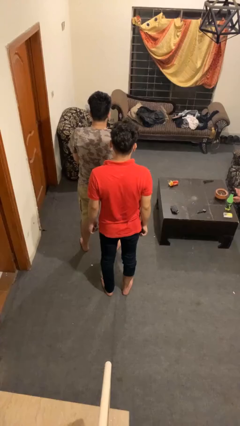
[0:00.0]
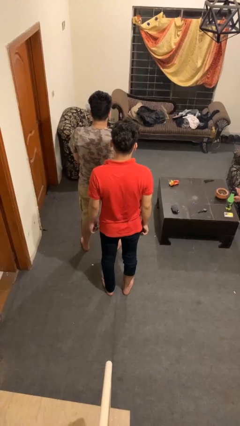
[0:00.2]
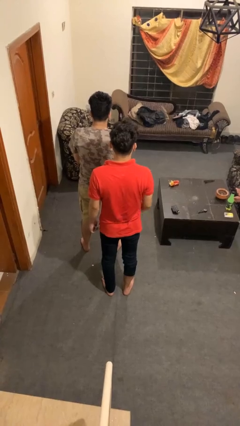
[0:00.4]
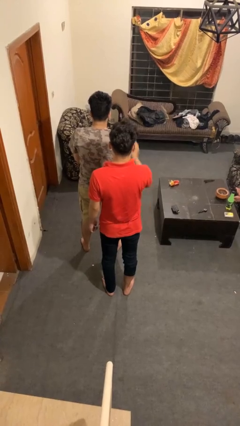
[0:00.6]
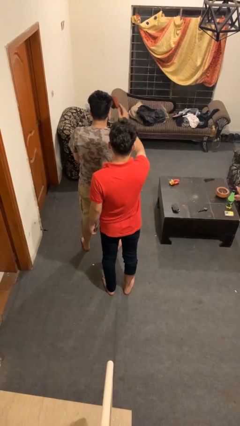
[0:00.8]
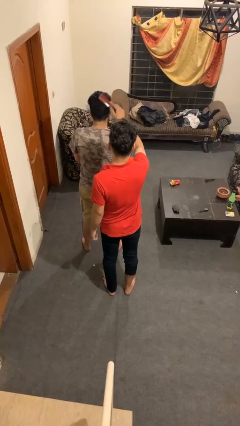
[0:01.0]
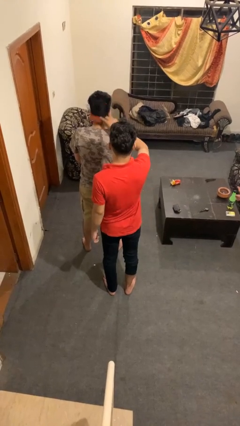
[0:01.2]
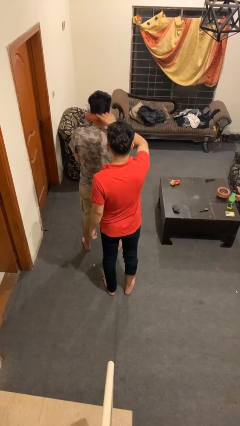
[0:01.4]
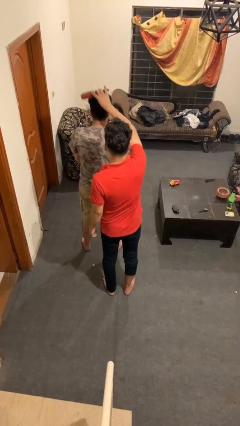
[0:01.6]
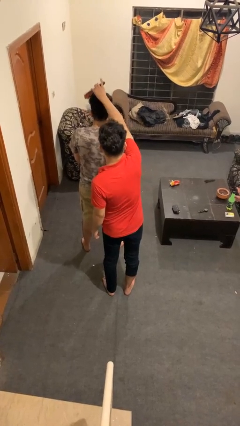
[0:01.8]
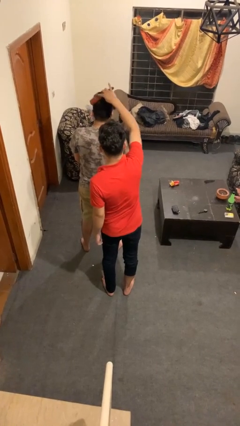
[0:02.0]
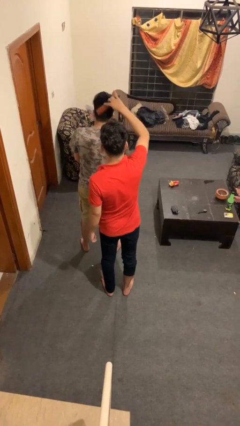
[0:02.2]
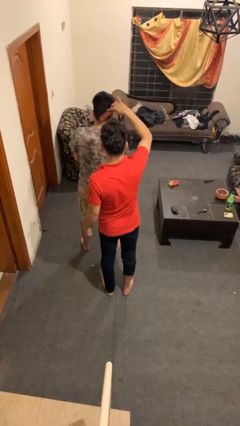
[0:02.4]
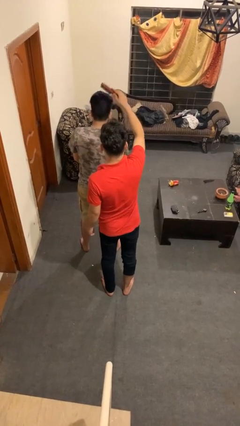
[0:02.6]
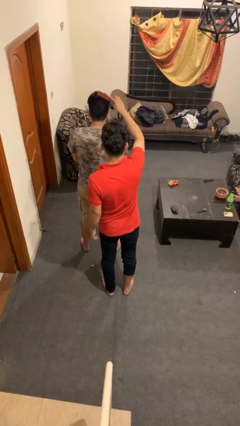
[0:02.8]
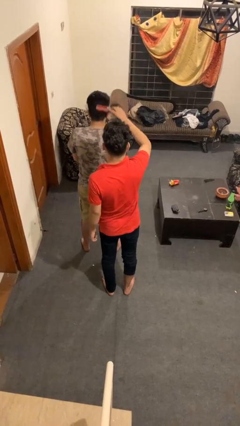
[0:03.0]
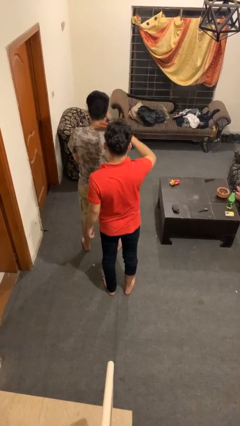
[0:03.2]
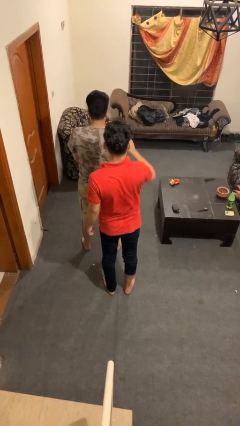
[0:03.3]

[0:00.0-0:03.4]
person brushes hair of person

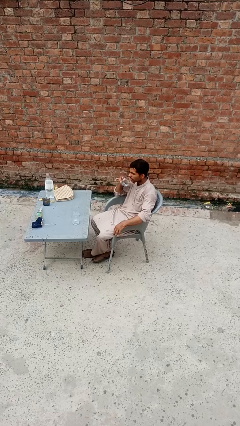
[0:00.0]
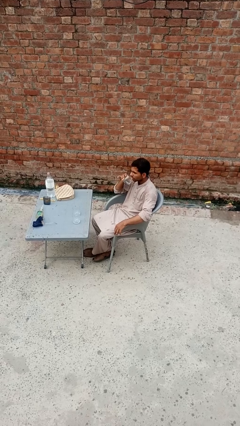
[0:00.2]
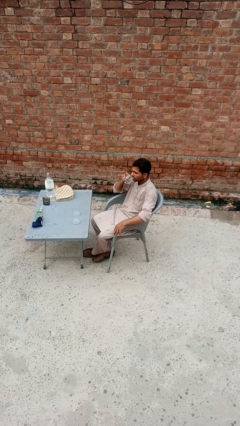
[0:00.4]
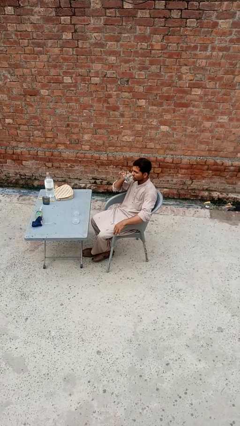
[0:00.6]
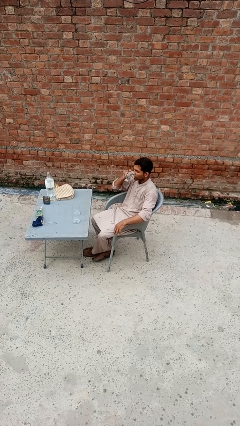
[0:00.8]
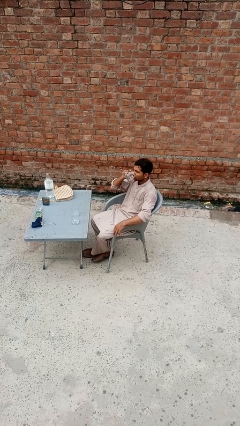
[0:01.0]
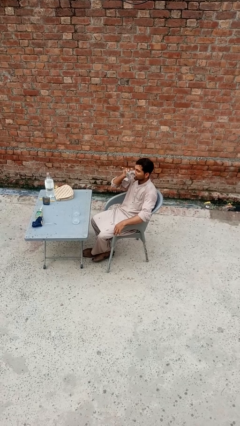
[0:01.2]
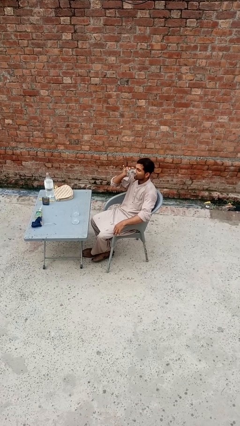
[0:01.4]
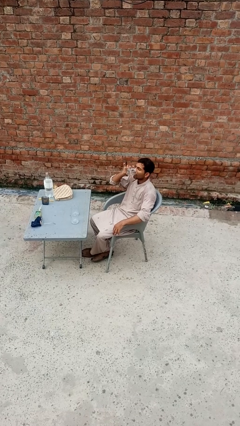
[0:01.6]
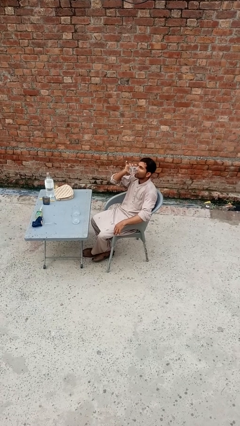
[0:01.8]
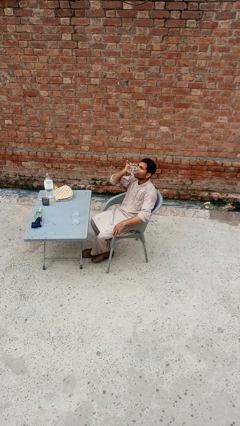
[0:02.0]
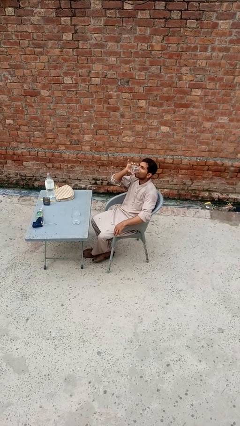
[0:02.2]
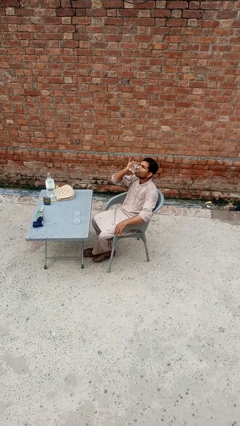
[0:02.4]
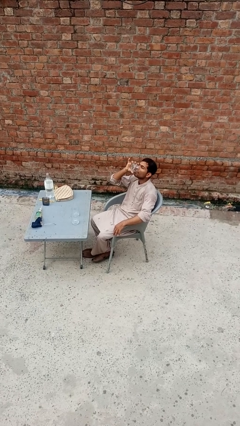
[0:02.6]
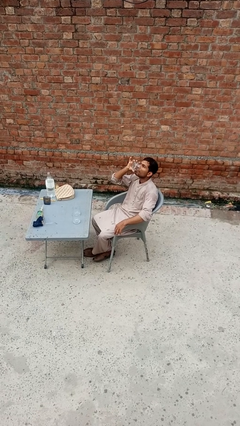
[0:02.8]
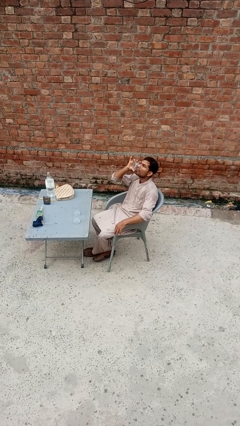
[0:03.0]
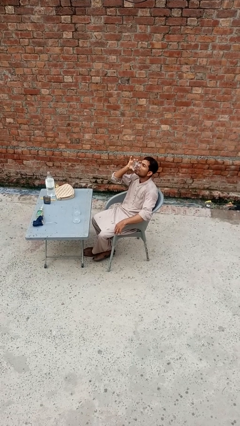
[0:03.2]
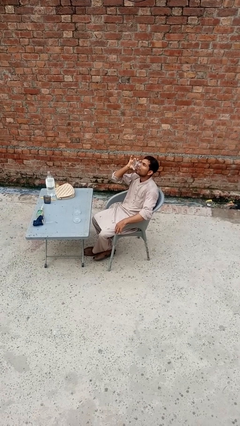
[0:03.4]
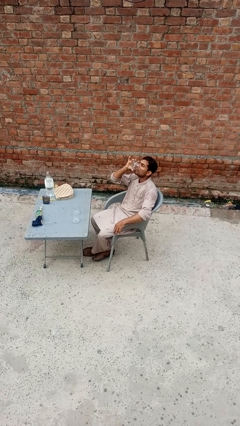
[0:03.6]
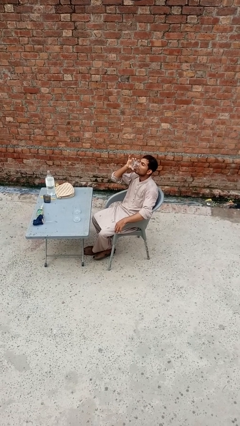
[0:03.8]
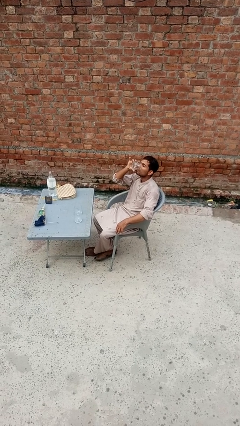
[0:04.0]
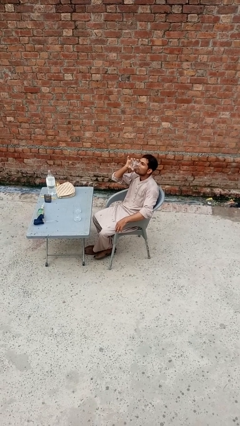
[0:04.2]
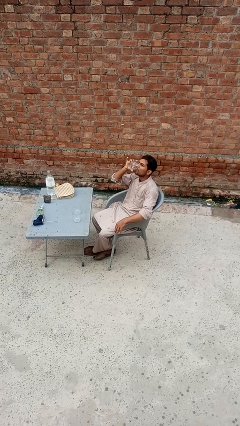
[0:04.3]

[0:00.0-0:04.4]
person drinks from shotglass

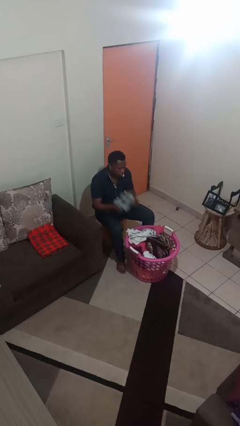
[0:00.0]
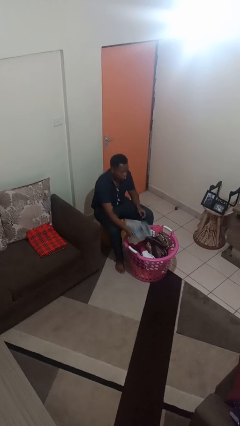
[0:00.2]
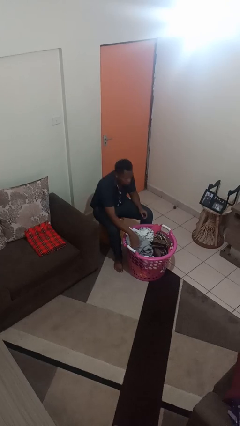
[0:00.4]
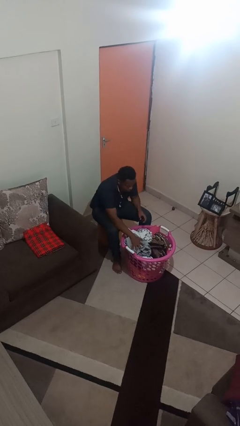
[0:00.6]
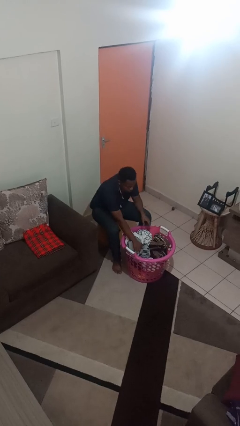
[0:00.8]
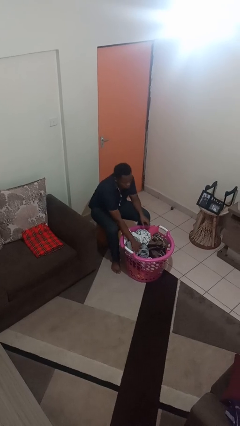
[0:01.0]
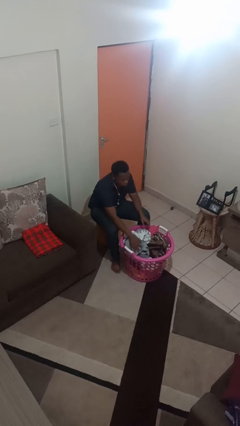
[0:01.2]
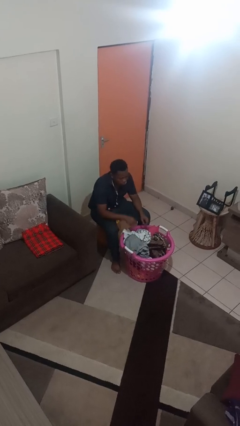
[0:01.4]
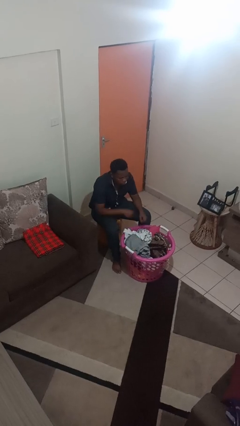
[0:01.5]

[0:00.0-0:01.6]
person puts object into basket

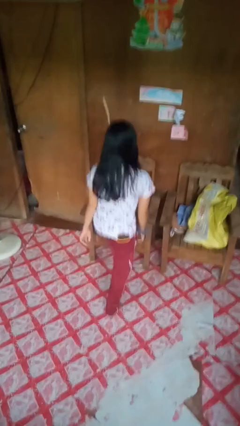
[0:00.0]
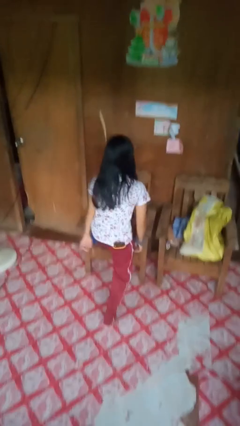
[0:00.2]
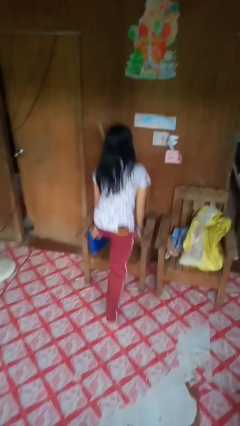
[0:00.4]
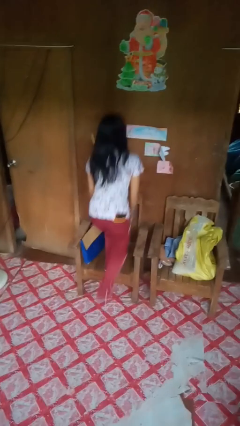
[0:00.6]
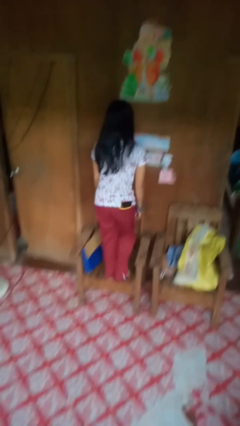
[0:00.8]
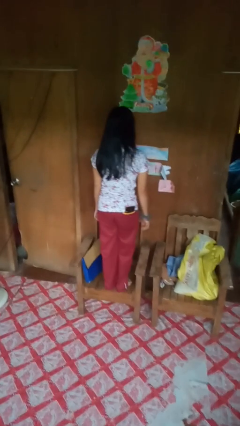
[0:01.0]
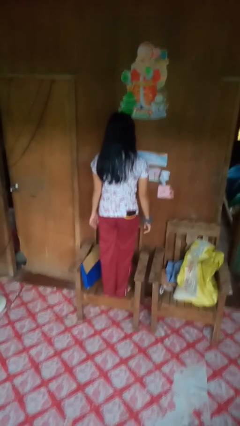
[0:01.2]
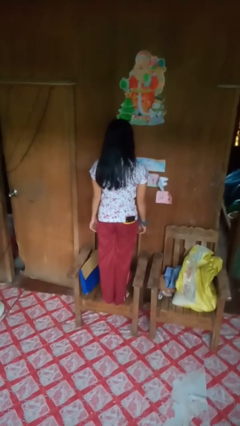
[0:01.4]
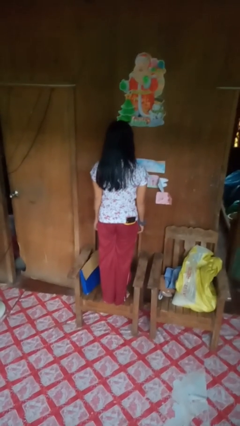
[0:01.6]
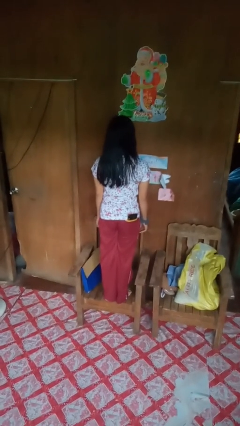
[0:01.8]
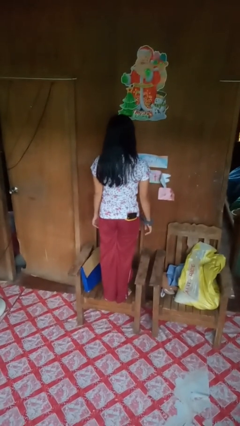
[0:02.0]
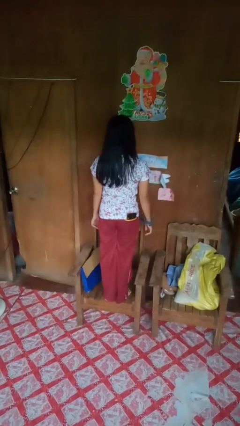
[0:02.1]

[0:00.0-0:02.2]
person climbs on chair

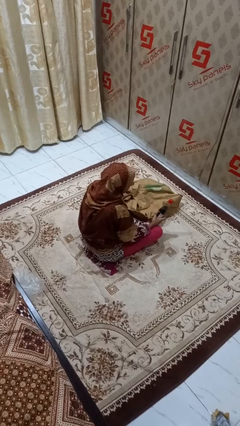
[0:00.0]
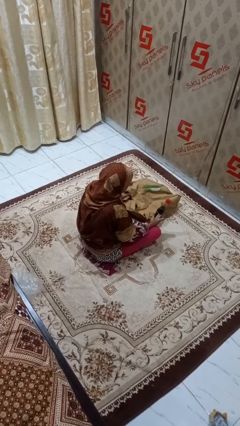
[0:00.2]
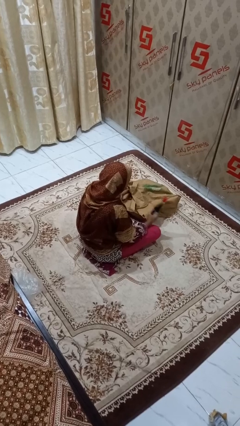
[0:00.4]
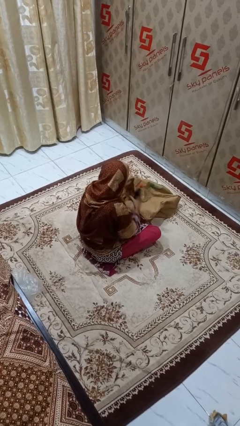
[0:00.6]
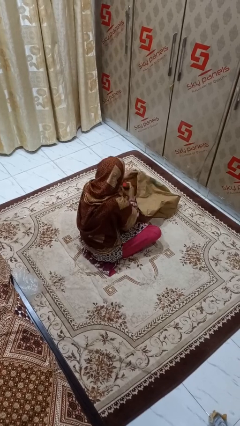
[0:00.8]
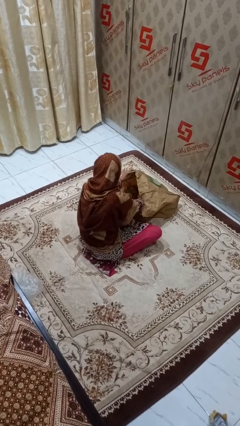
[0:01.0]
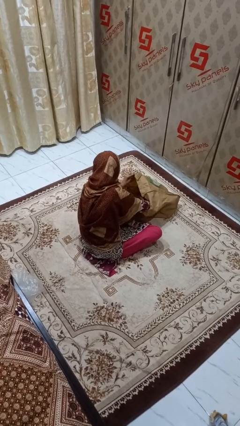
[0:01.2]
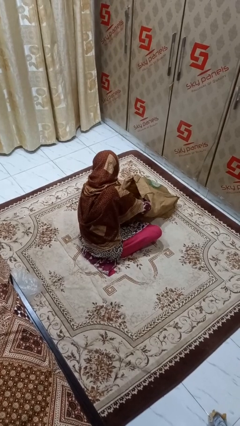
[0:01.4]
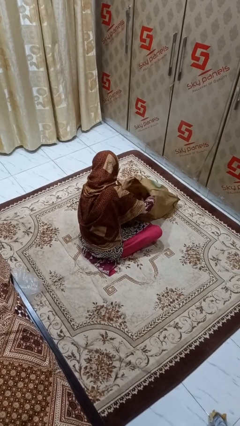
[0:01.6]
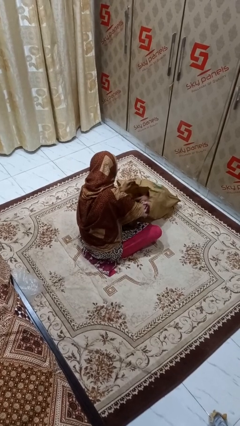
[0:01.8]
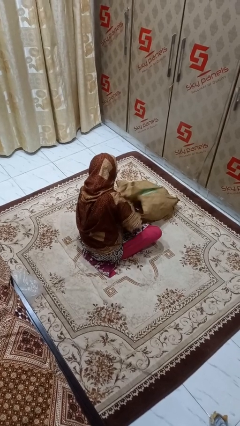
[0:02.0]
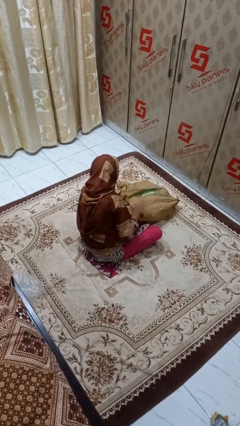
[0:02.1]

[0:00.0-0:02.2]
person puts object into bag

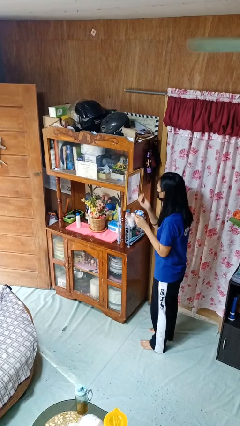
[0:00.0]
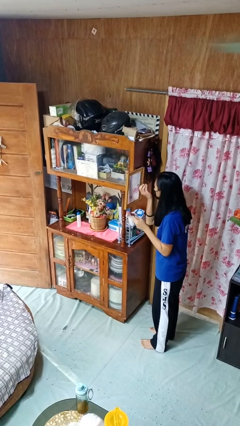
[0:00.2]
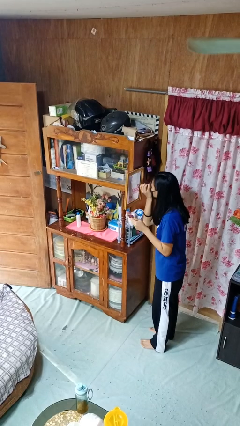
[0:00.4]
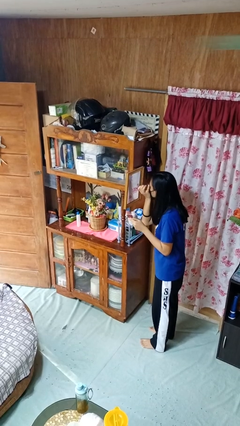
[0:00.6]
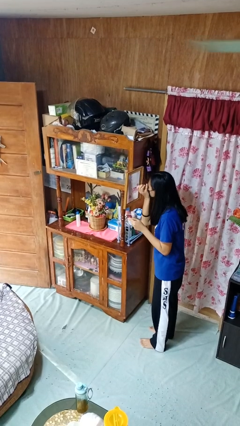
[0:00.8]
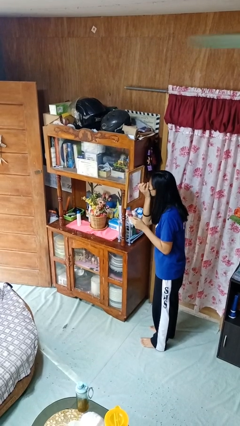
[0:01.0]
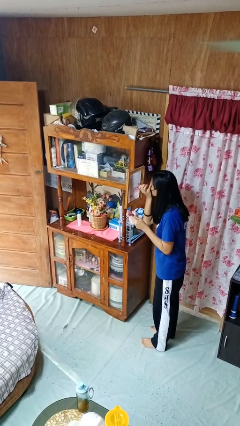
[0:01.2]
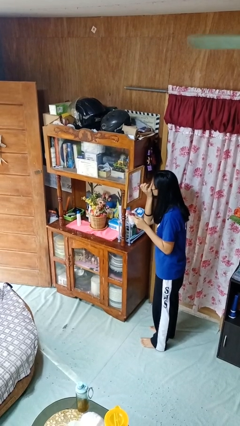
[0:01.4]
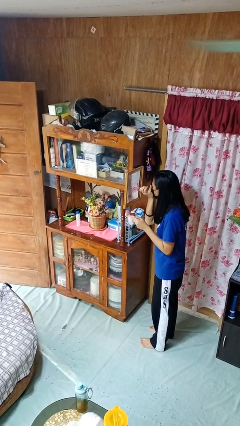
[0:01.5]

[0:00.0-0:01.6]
person applies eye makeup

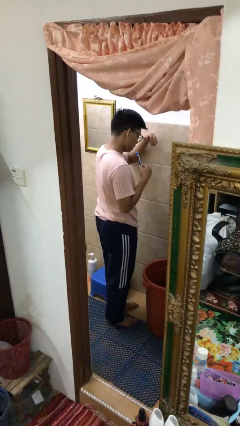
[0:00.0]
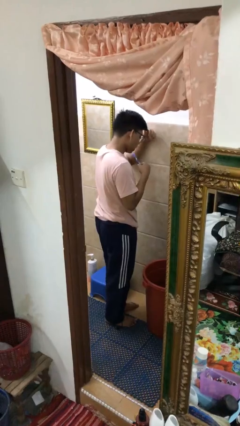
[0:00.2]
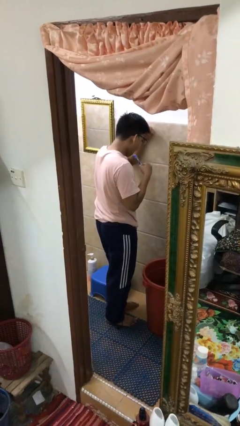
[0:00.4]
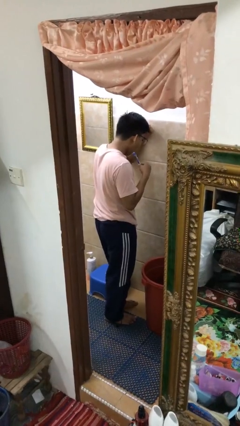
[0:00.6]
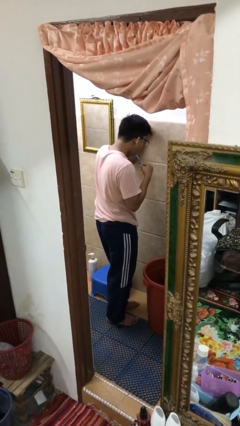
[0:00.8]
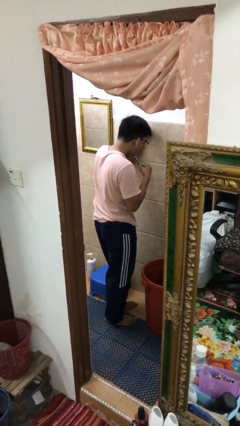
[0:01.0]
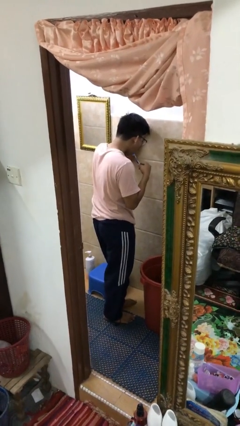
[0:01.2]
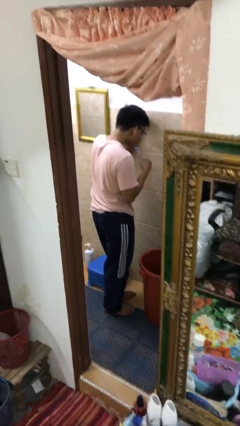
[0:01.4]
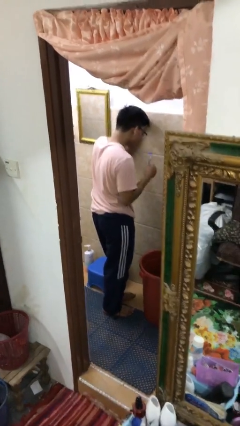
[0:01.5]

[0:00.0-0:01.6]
person brushes teeth

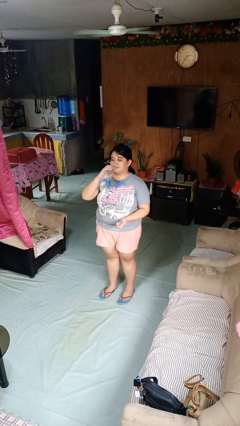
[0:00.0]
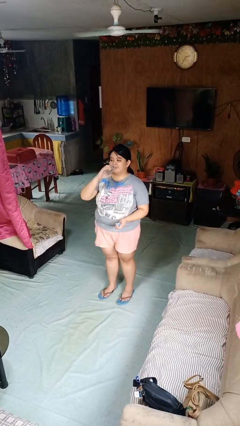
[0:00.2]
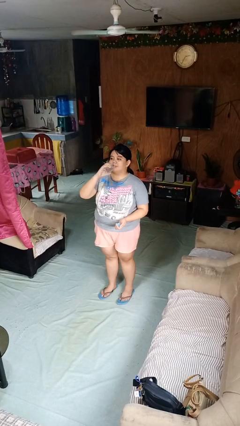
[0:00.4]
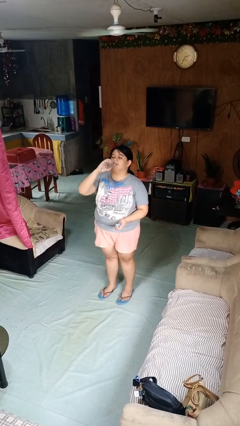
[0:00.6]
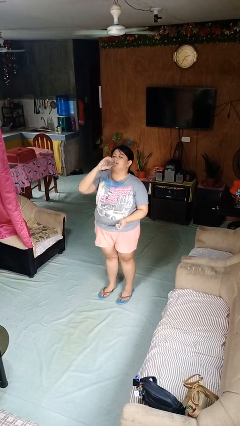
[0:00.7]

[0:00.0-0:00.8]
person drinks from bottle
